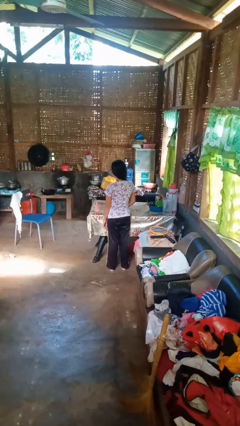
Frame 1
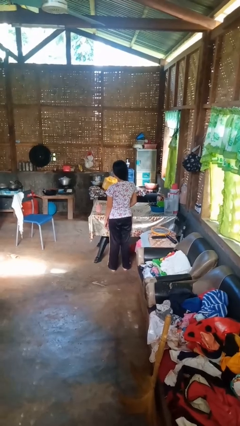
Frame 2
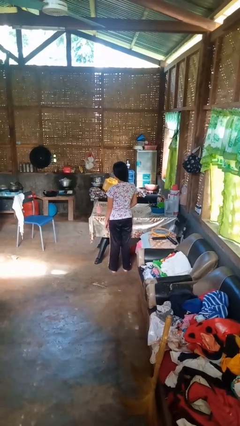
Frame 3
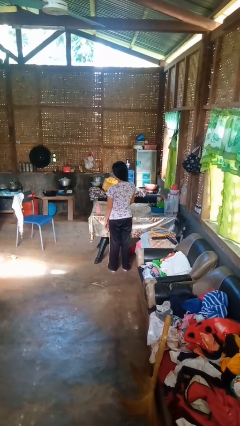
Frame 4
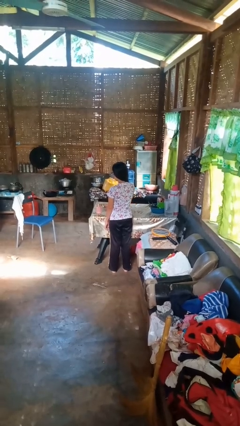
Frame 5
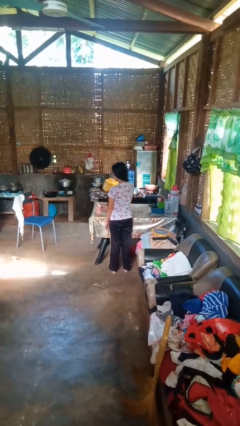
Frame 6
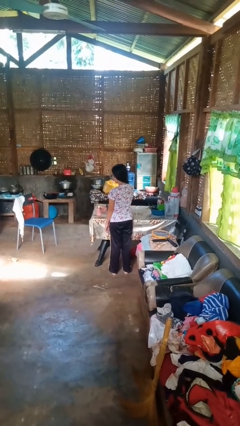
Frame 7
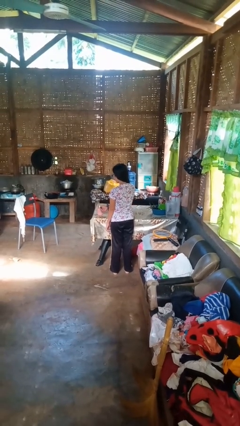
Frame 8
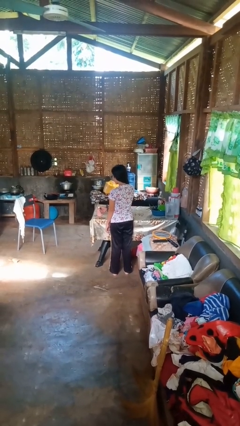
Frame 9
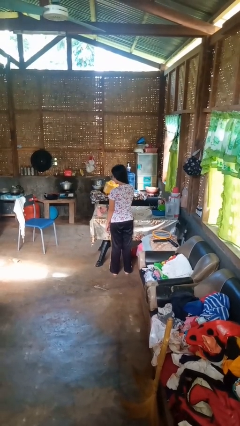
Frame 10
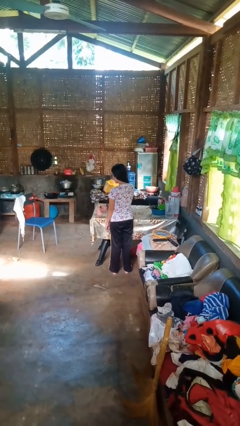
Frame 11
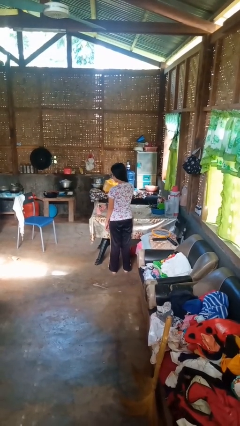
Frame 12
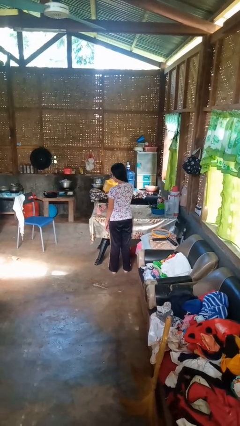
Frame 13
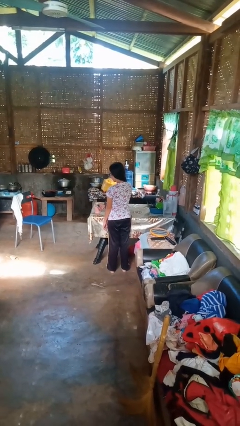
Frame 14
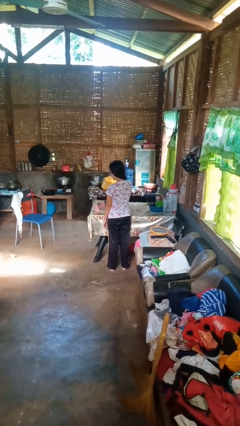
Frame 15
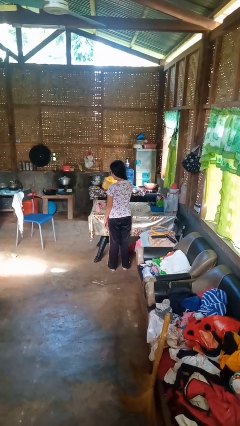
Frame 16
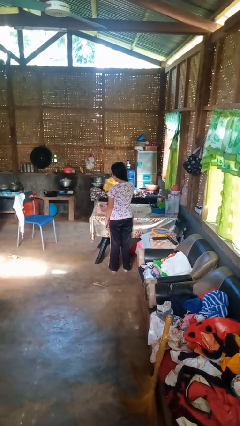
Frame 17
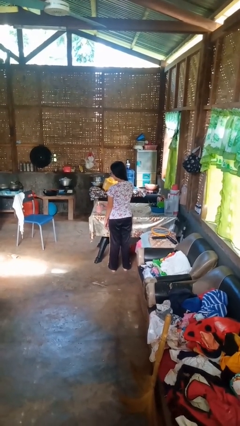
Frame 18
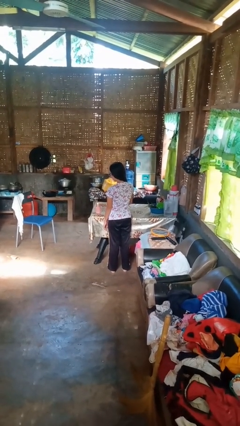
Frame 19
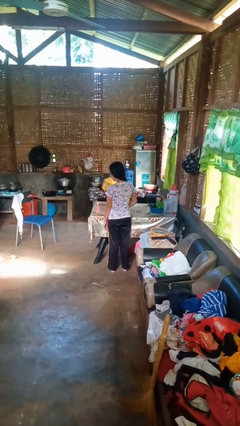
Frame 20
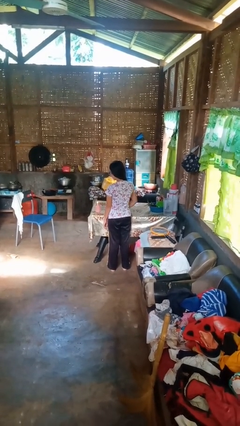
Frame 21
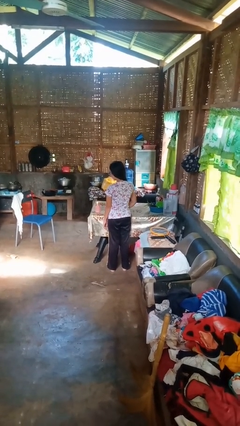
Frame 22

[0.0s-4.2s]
person lights candle

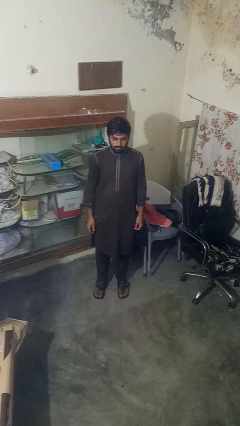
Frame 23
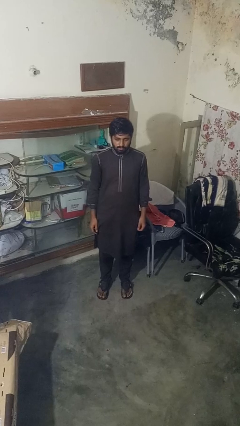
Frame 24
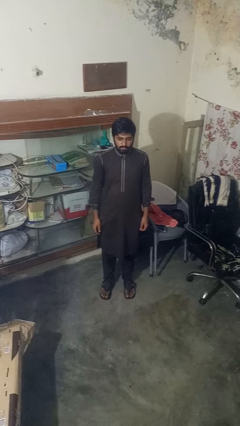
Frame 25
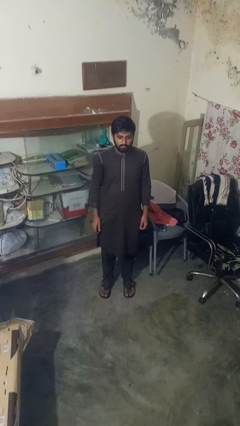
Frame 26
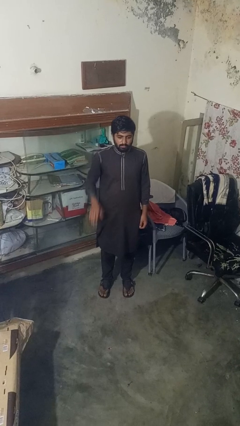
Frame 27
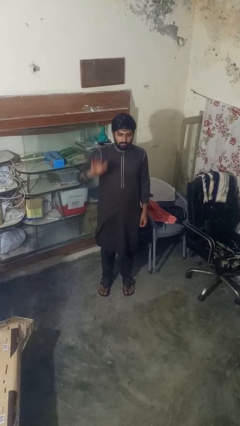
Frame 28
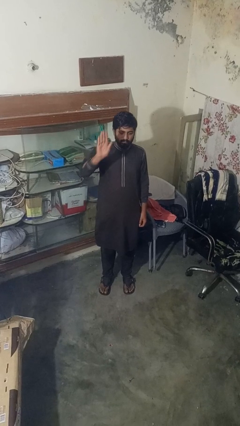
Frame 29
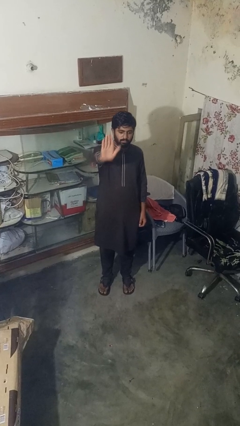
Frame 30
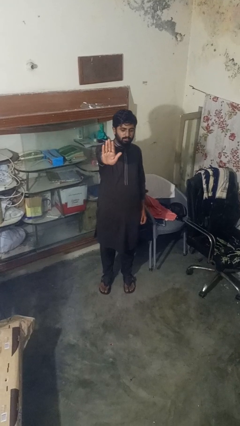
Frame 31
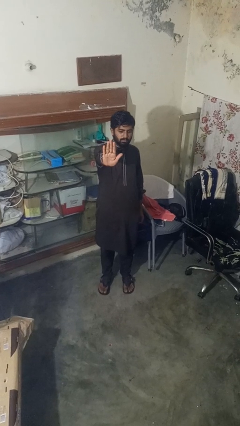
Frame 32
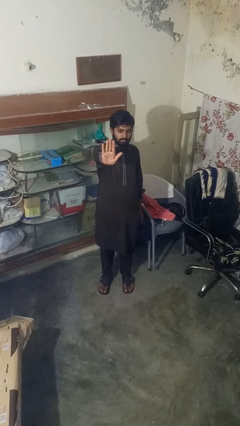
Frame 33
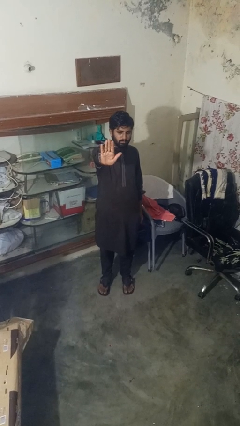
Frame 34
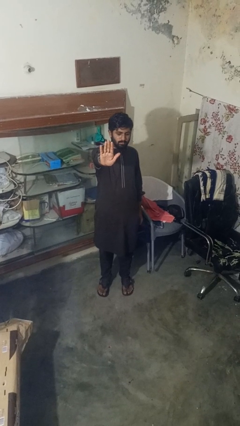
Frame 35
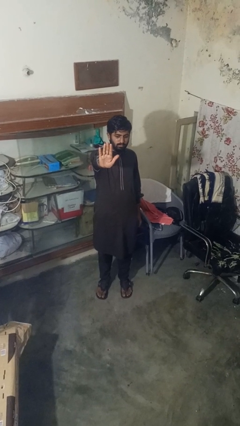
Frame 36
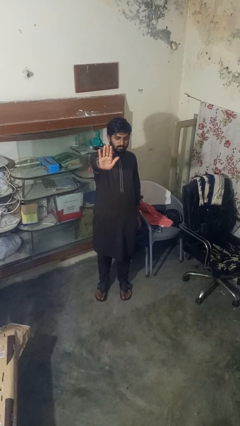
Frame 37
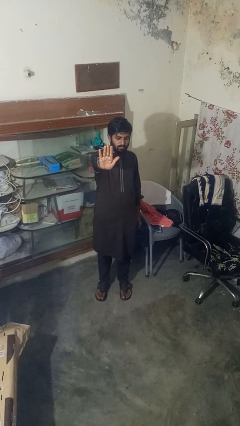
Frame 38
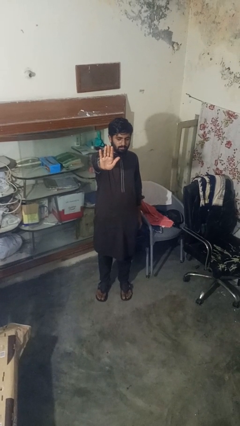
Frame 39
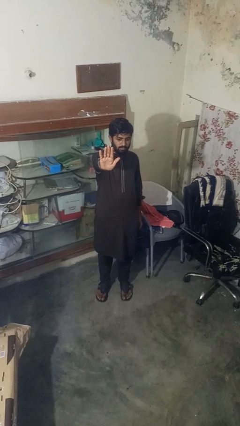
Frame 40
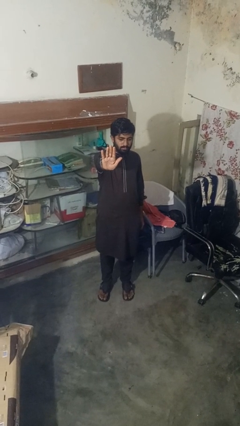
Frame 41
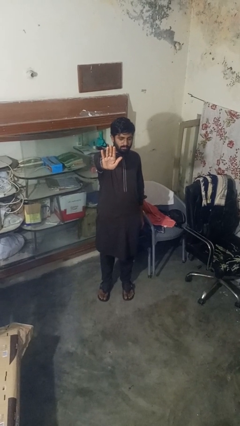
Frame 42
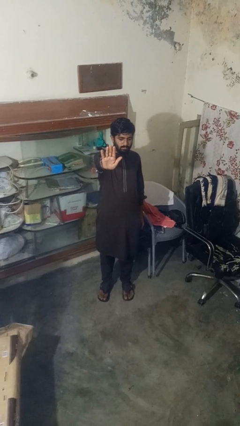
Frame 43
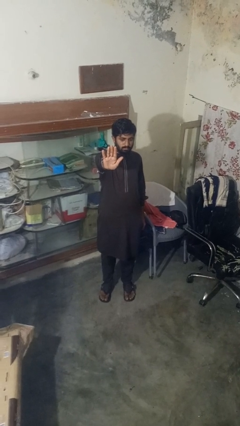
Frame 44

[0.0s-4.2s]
person gestures stop

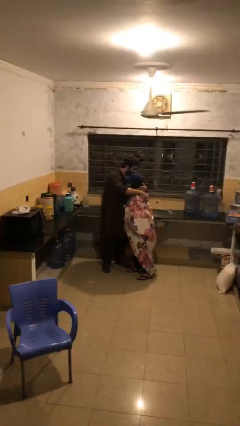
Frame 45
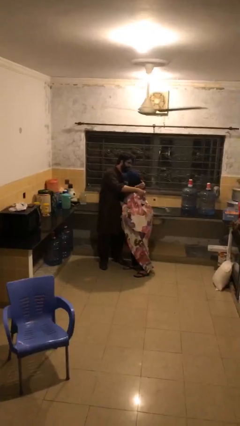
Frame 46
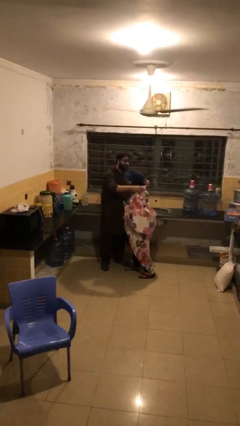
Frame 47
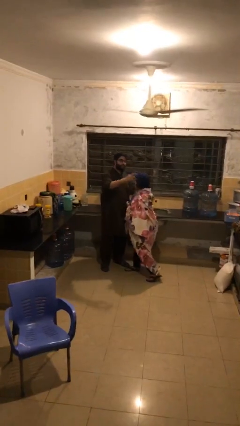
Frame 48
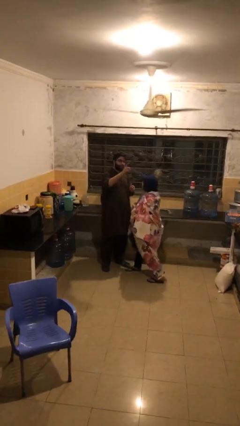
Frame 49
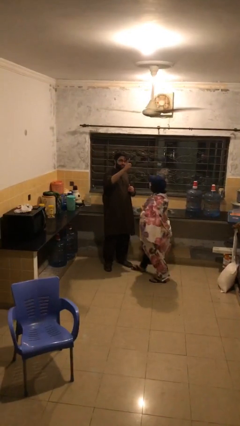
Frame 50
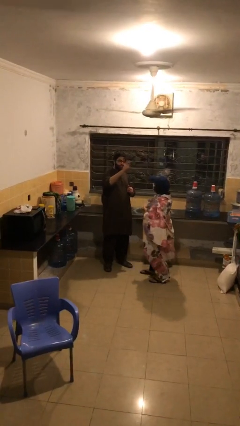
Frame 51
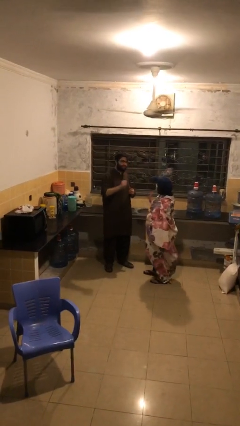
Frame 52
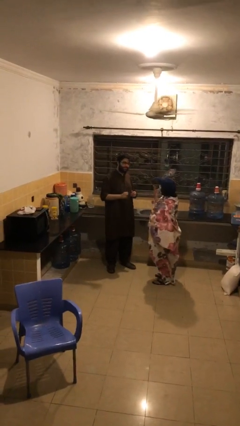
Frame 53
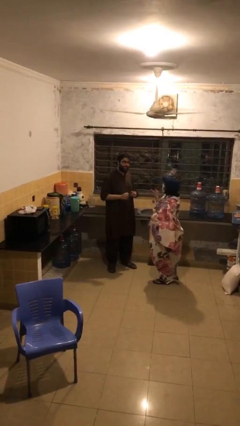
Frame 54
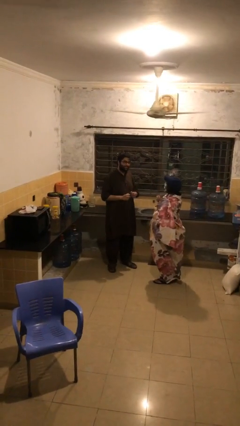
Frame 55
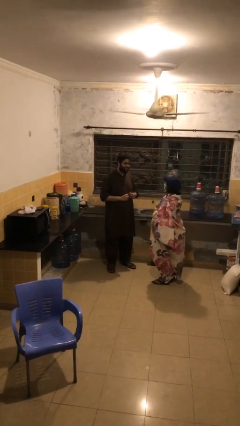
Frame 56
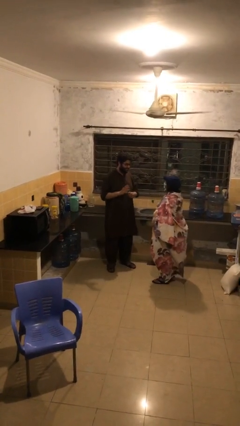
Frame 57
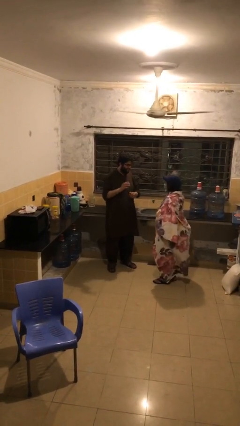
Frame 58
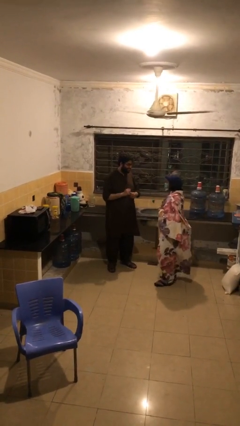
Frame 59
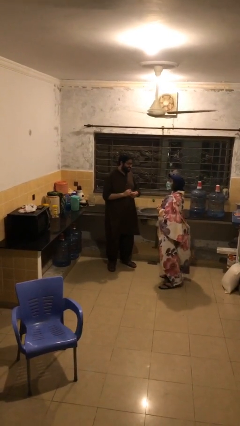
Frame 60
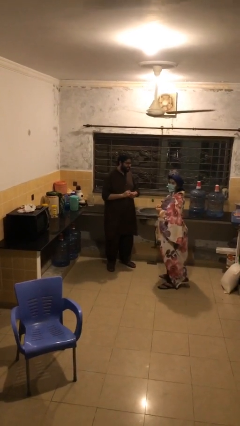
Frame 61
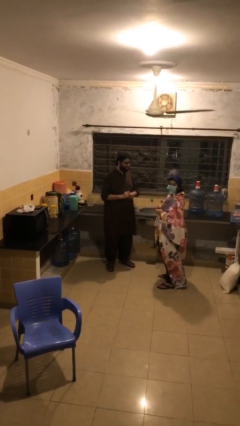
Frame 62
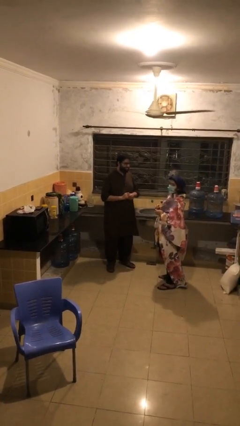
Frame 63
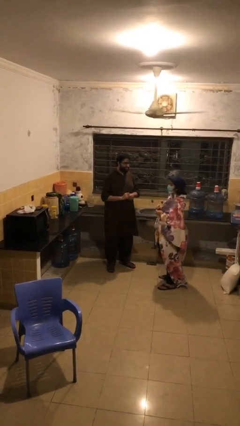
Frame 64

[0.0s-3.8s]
person talks to person

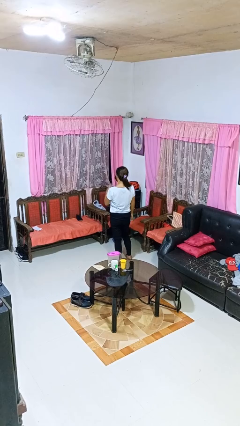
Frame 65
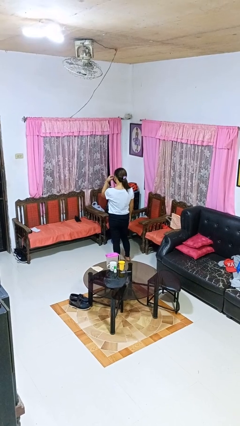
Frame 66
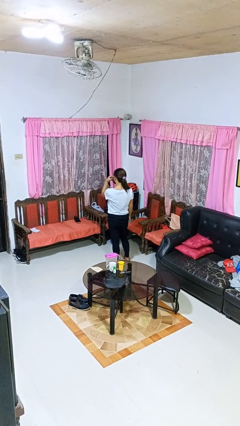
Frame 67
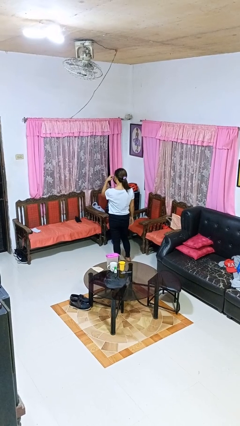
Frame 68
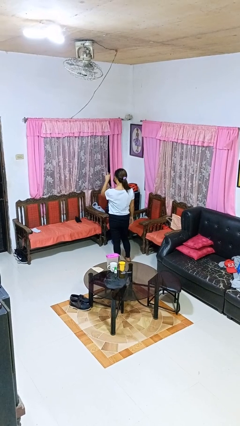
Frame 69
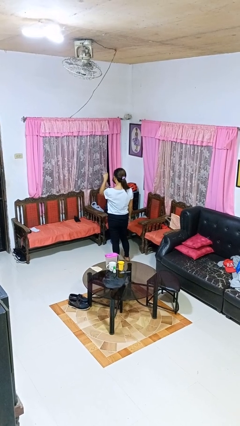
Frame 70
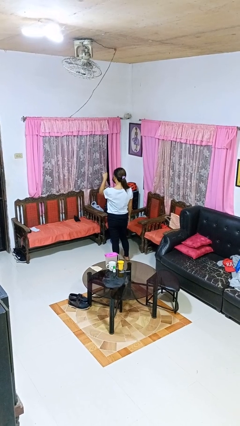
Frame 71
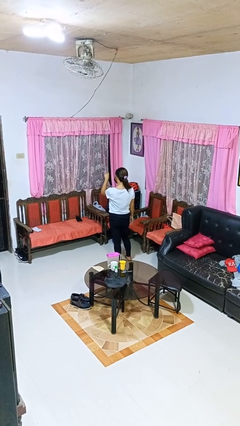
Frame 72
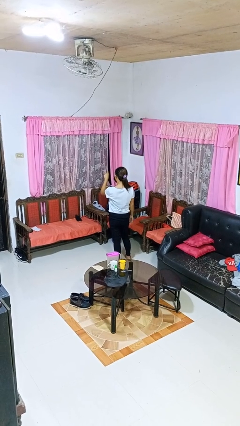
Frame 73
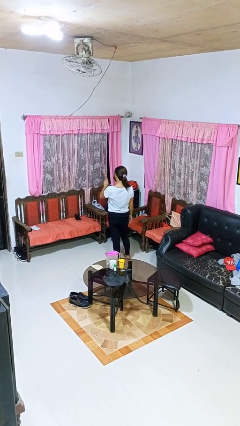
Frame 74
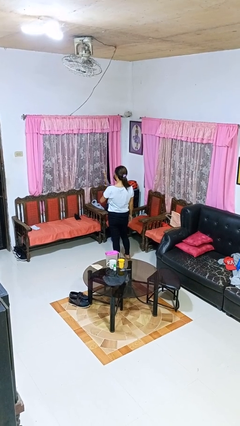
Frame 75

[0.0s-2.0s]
person gestures watch closely

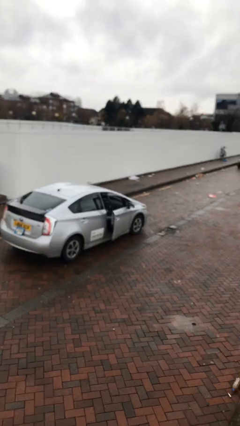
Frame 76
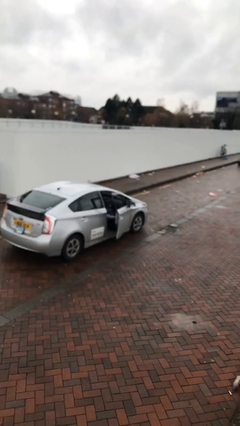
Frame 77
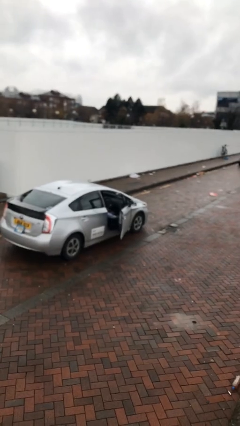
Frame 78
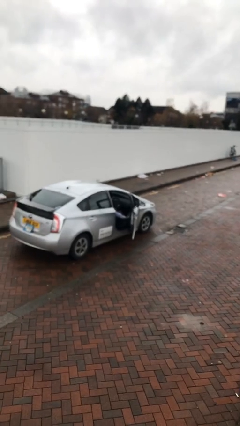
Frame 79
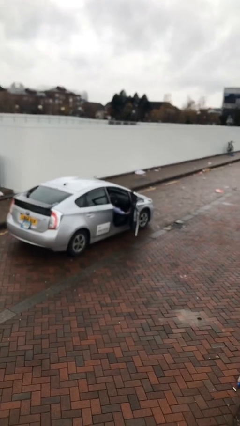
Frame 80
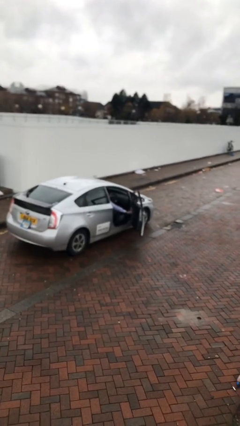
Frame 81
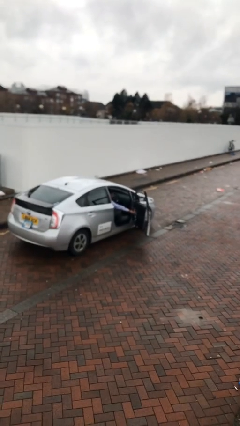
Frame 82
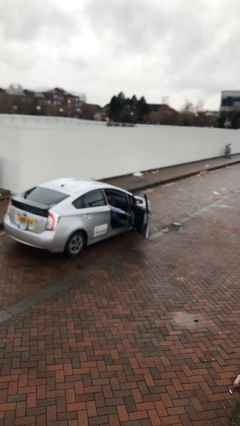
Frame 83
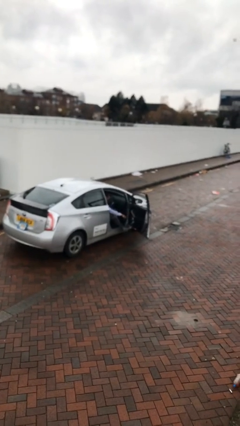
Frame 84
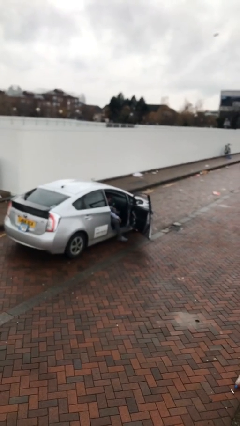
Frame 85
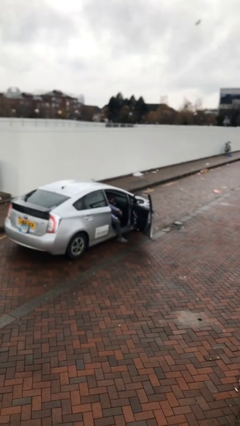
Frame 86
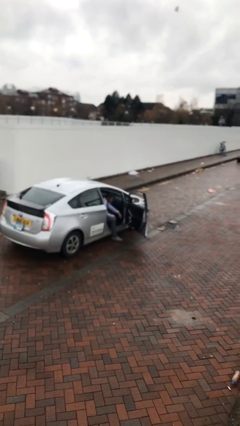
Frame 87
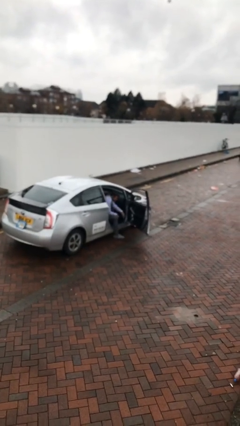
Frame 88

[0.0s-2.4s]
person opens car door

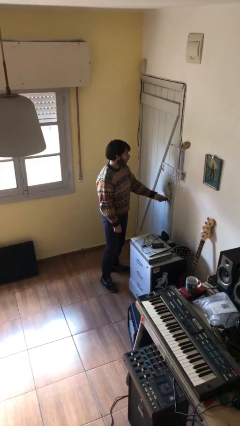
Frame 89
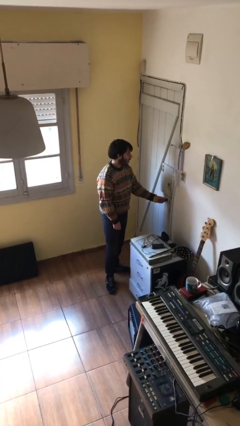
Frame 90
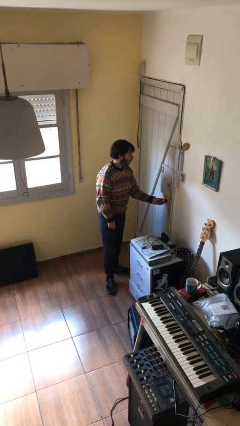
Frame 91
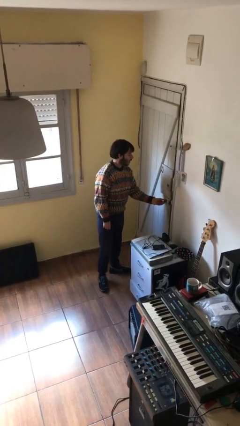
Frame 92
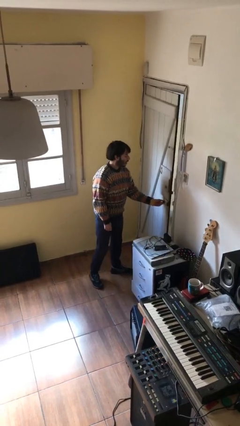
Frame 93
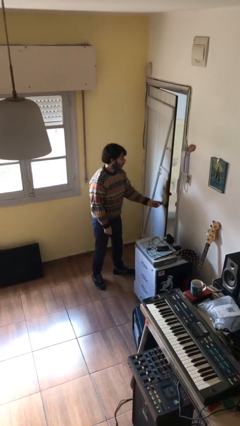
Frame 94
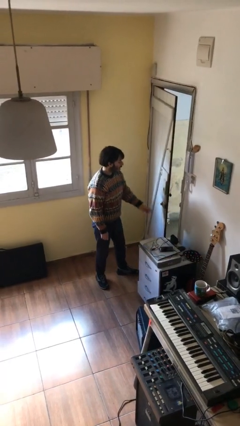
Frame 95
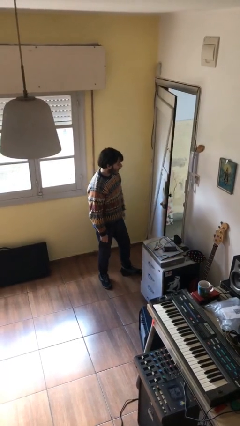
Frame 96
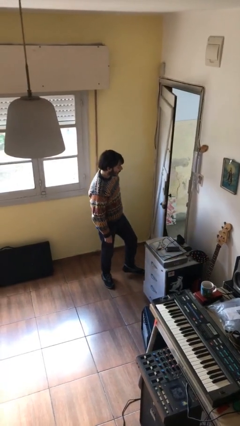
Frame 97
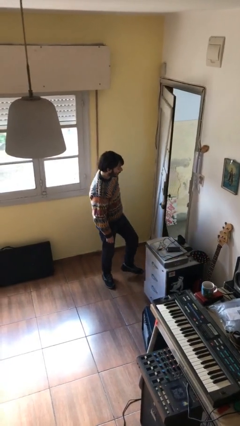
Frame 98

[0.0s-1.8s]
person opens facility door
